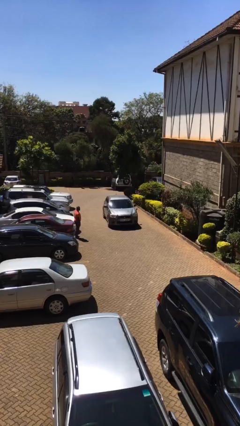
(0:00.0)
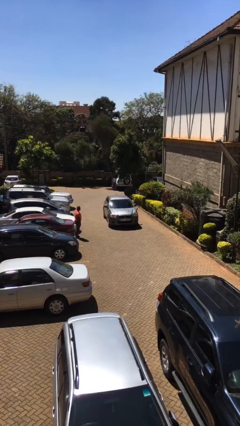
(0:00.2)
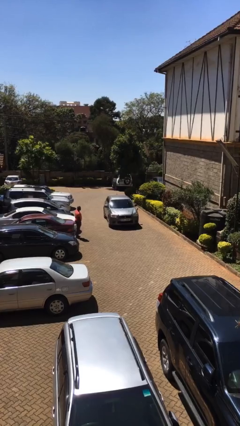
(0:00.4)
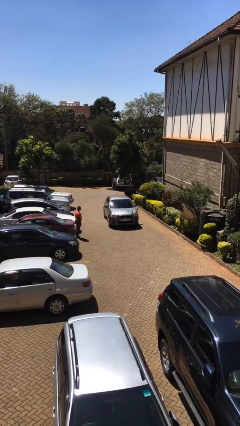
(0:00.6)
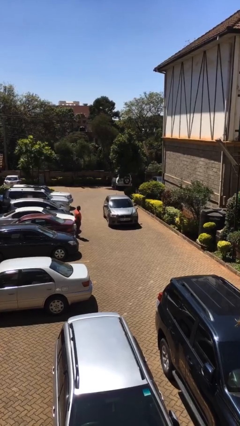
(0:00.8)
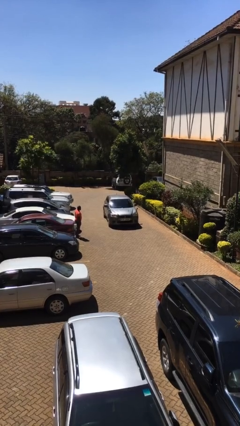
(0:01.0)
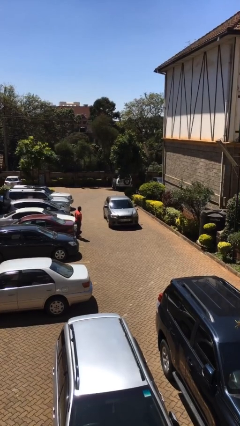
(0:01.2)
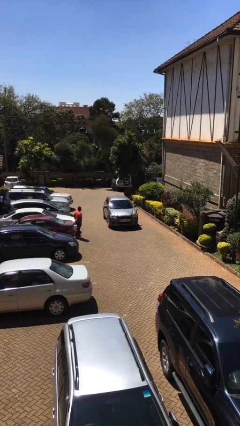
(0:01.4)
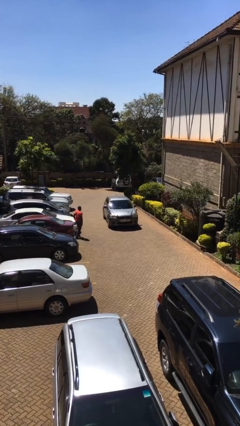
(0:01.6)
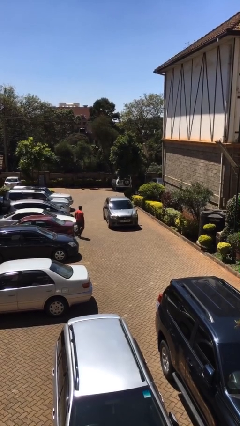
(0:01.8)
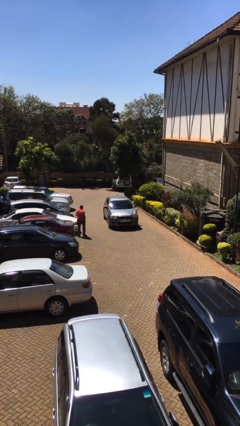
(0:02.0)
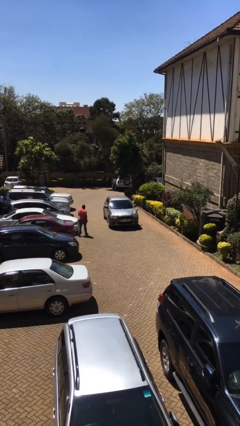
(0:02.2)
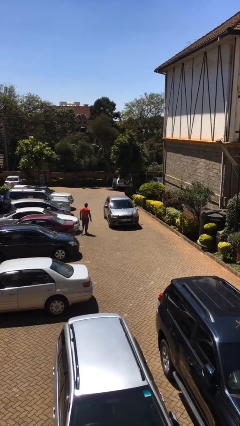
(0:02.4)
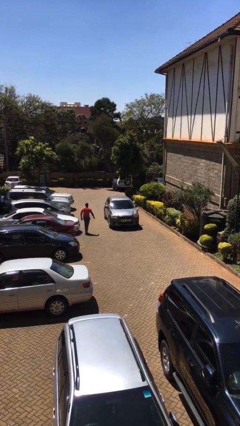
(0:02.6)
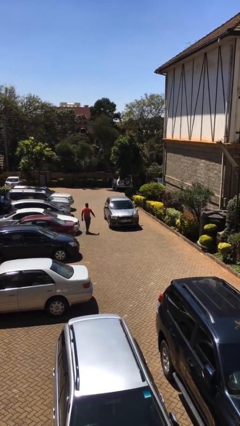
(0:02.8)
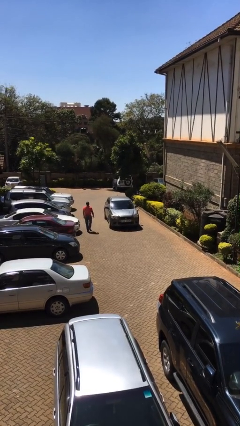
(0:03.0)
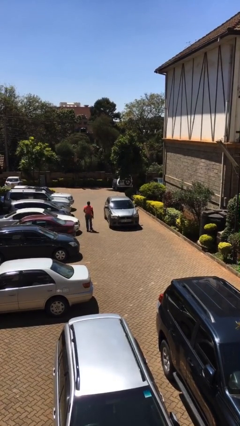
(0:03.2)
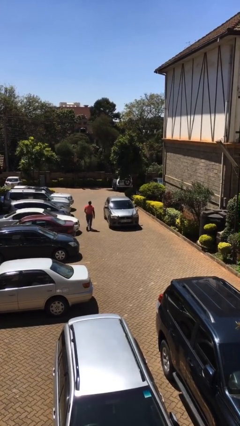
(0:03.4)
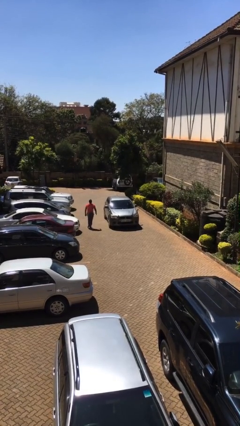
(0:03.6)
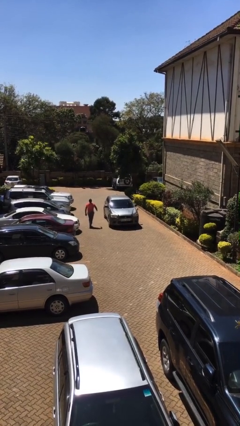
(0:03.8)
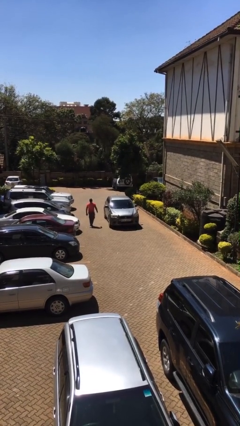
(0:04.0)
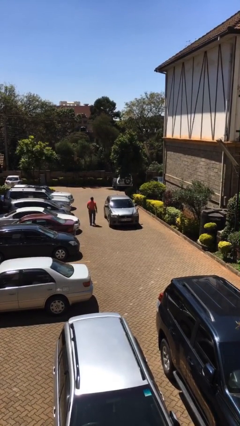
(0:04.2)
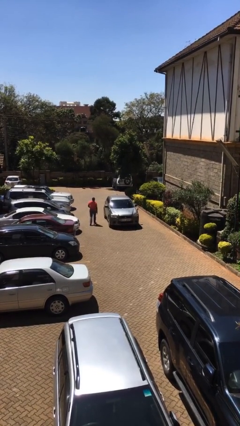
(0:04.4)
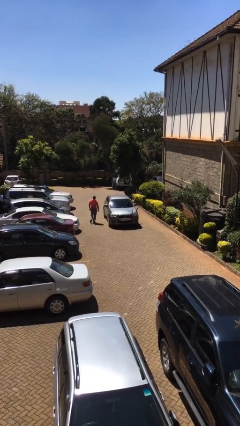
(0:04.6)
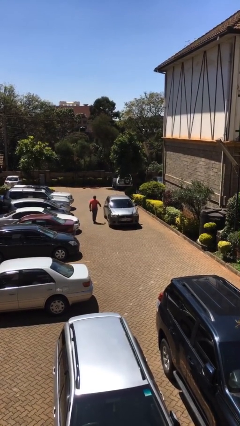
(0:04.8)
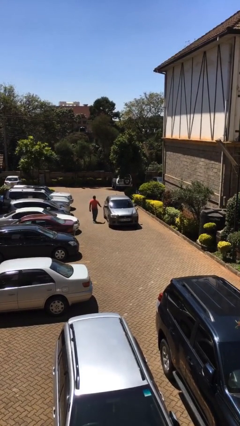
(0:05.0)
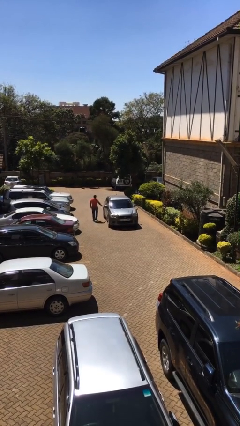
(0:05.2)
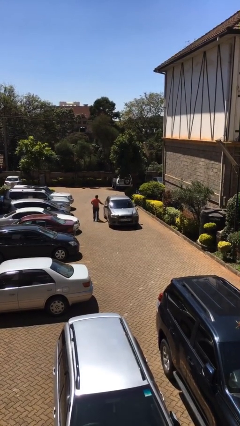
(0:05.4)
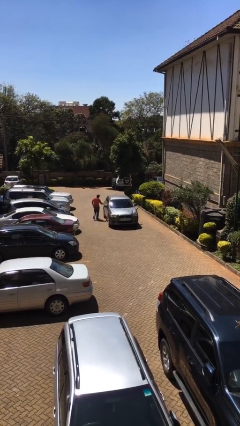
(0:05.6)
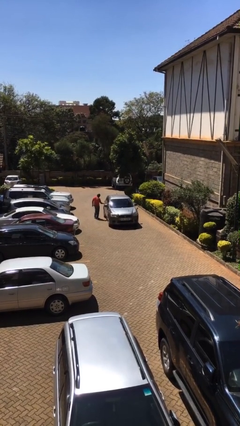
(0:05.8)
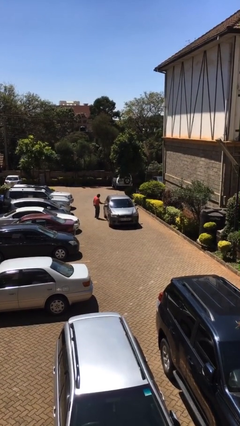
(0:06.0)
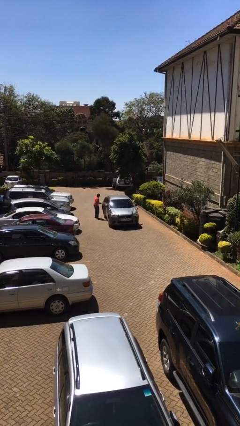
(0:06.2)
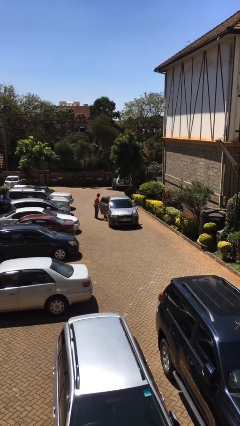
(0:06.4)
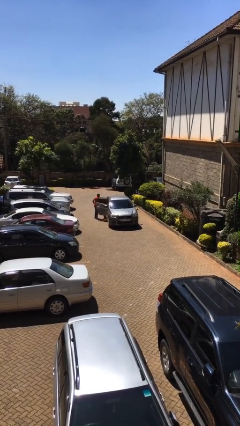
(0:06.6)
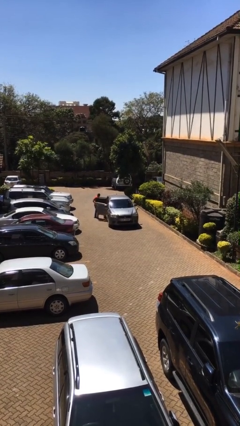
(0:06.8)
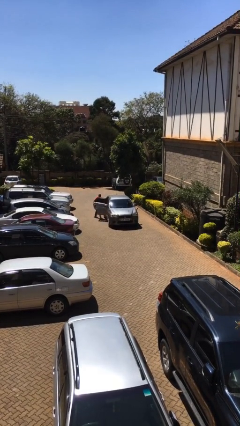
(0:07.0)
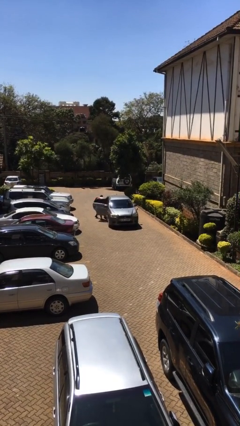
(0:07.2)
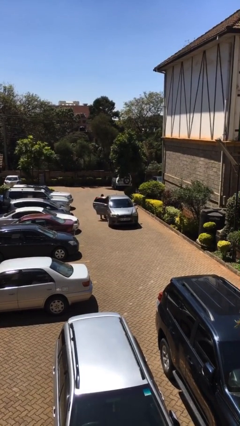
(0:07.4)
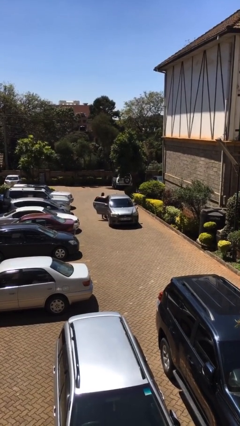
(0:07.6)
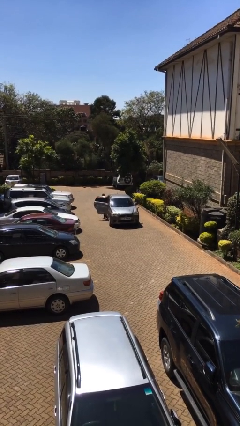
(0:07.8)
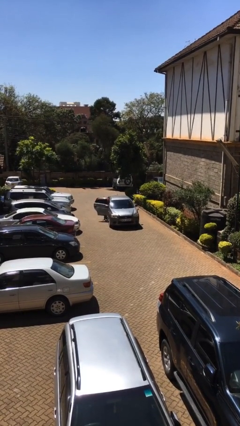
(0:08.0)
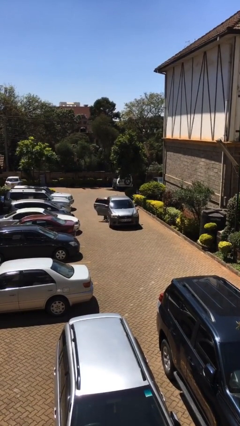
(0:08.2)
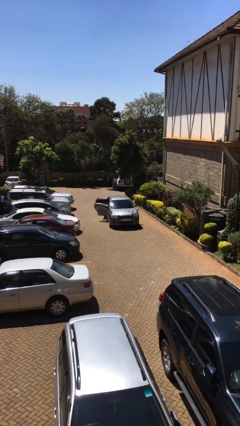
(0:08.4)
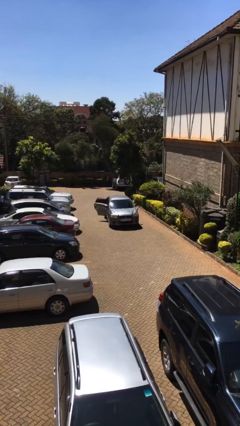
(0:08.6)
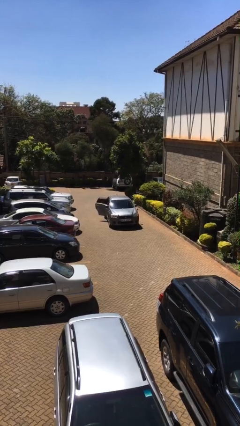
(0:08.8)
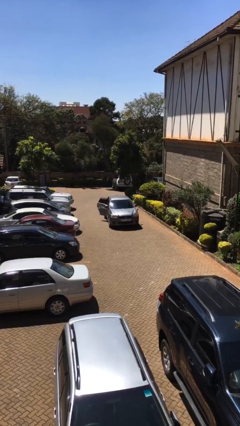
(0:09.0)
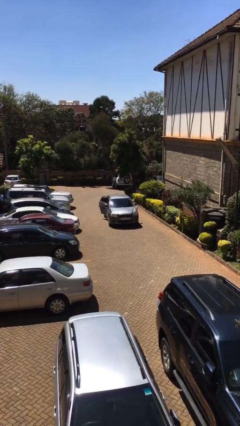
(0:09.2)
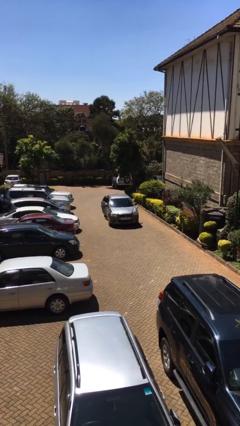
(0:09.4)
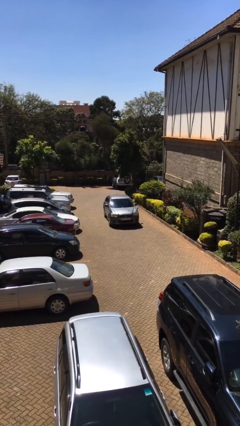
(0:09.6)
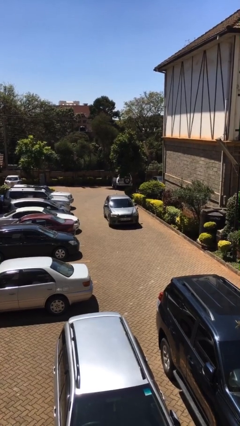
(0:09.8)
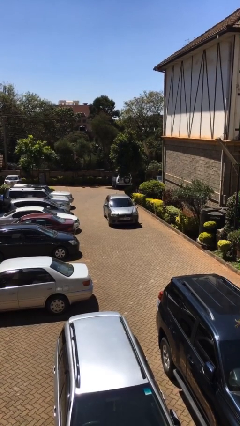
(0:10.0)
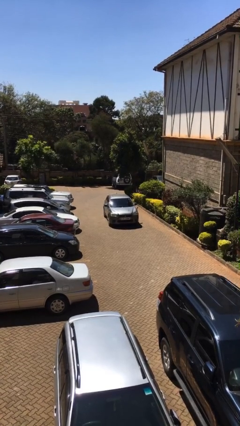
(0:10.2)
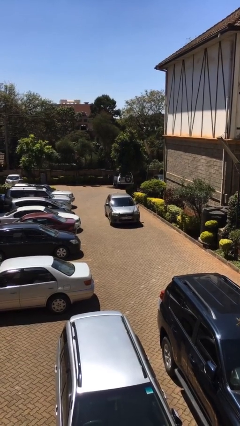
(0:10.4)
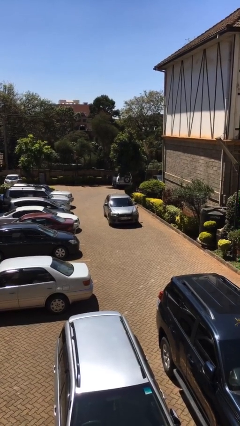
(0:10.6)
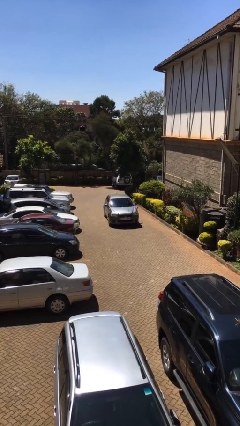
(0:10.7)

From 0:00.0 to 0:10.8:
car picks up person

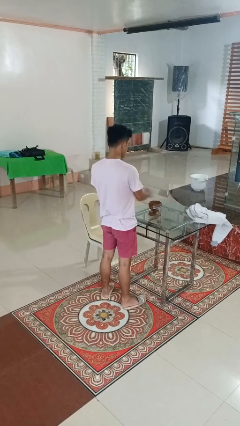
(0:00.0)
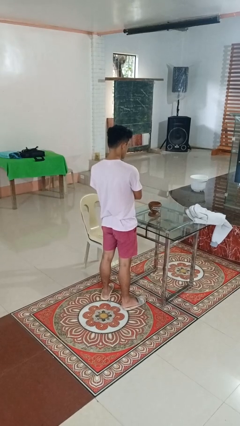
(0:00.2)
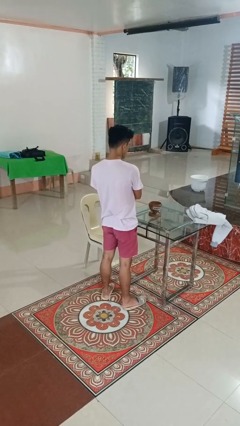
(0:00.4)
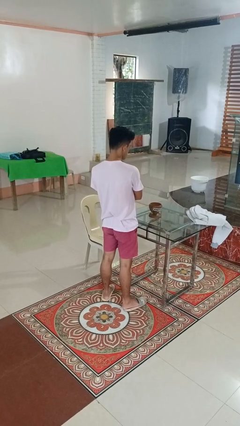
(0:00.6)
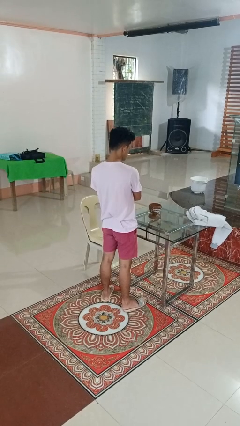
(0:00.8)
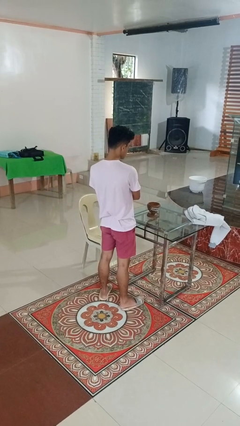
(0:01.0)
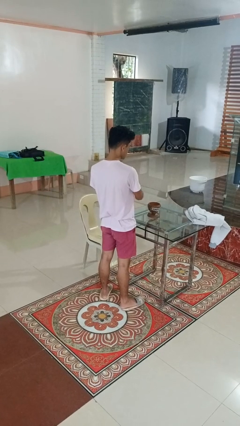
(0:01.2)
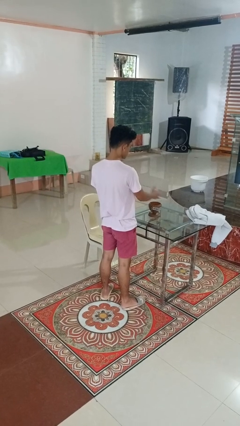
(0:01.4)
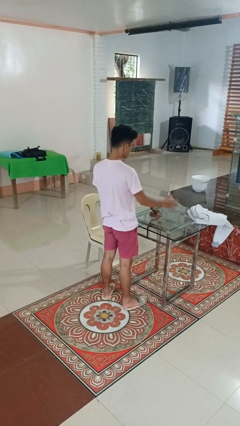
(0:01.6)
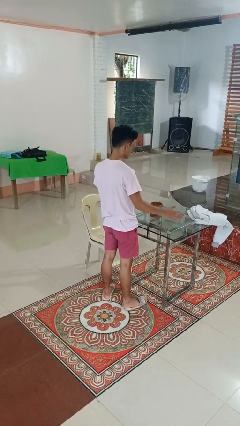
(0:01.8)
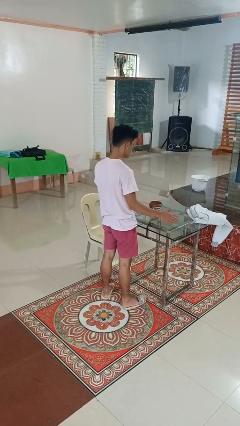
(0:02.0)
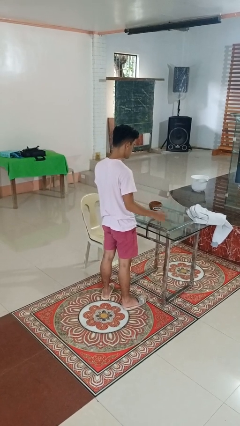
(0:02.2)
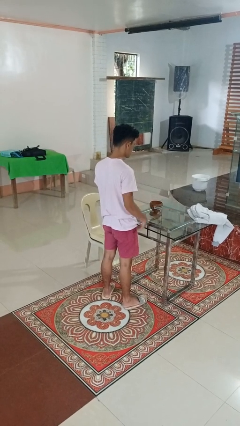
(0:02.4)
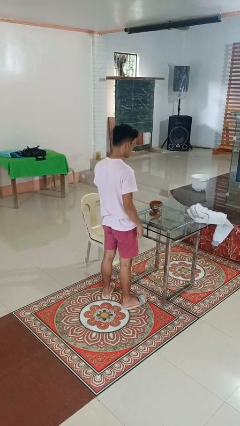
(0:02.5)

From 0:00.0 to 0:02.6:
person waves hand over object

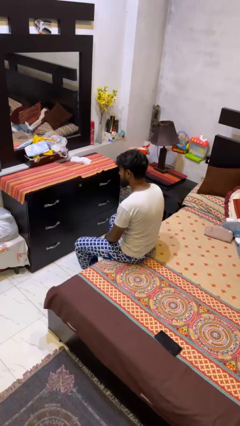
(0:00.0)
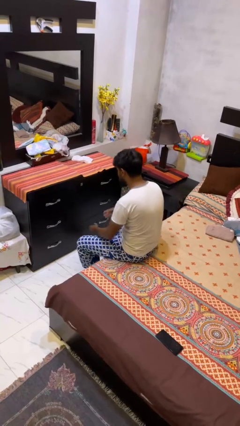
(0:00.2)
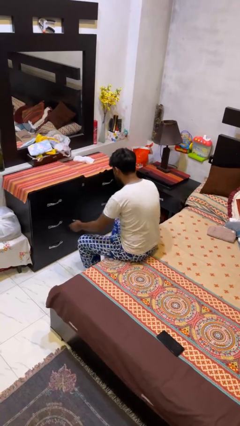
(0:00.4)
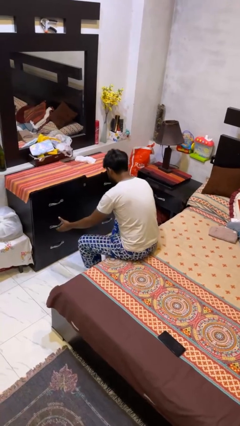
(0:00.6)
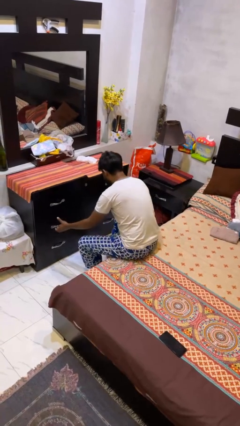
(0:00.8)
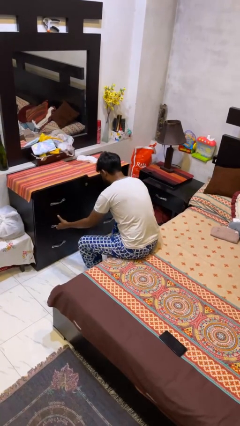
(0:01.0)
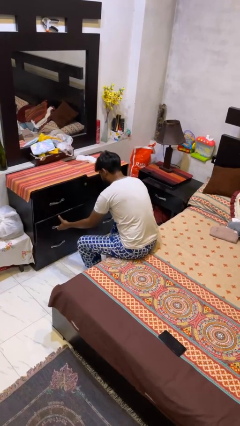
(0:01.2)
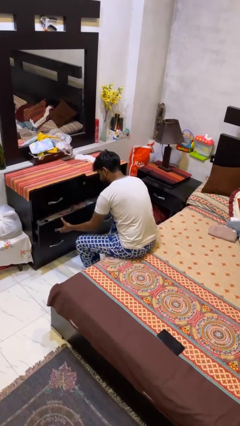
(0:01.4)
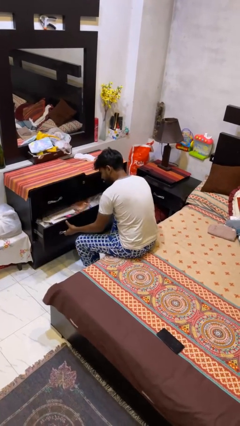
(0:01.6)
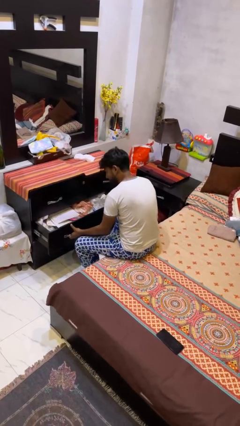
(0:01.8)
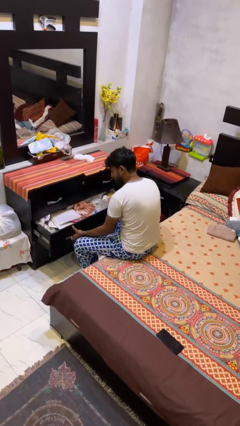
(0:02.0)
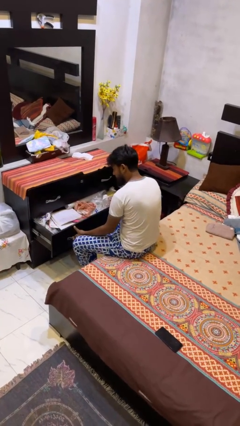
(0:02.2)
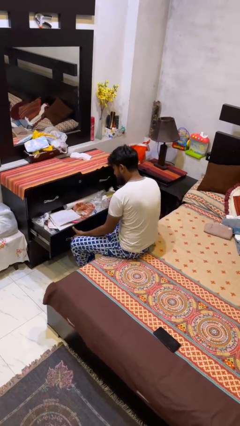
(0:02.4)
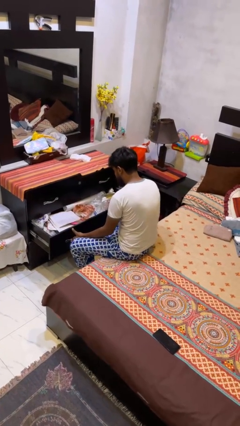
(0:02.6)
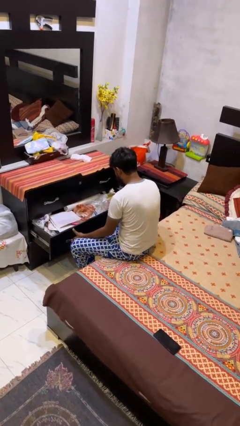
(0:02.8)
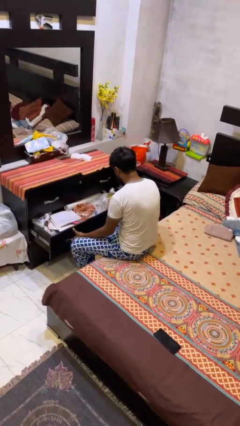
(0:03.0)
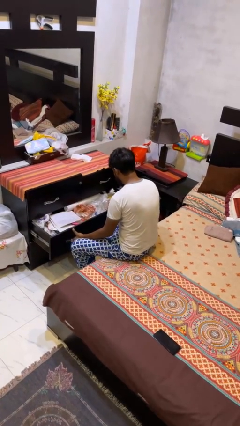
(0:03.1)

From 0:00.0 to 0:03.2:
person opens dresser drawer

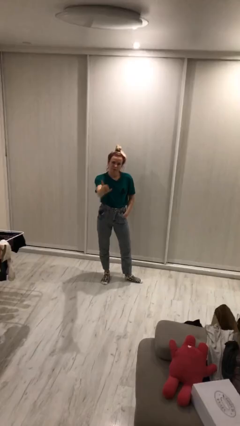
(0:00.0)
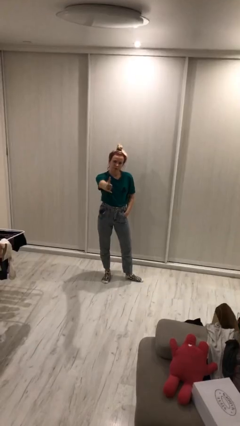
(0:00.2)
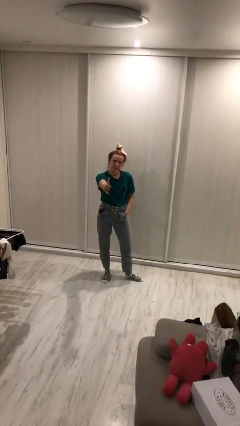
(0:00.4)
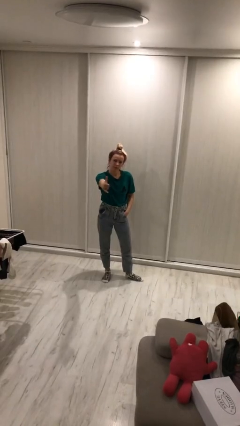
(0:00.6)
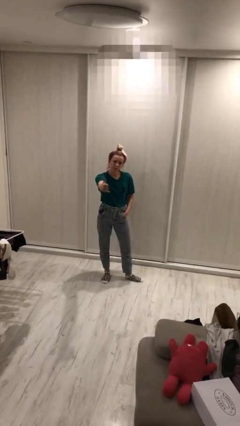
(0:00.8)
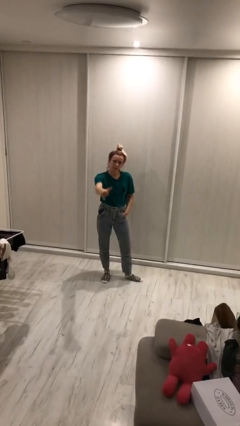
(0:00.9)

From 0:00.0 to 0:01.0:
person gestures hang loose
